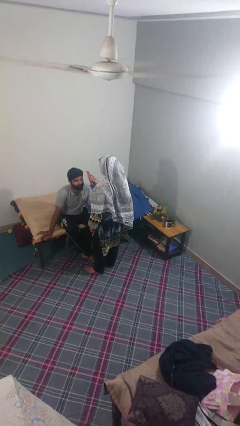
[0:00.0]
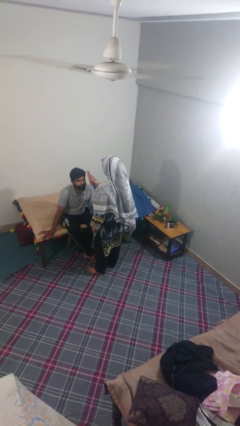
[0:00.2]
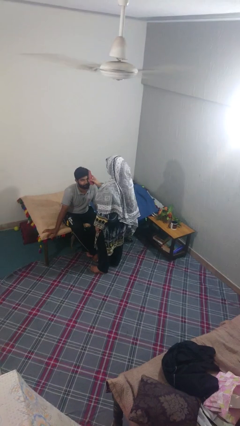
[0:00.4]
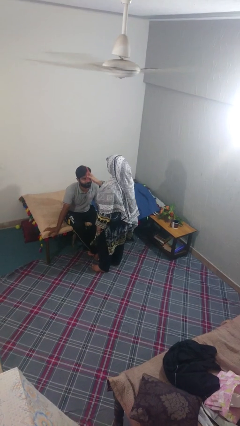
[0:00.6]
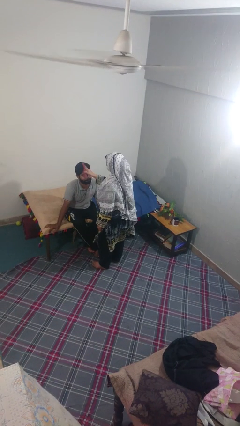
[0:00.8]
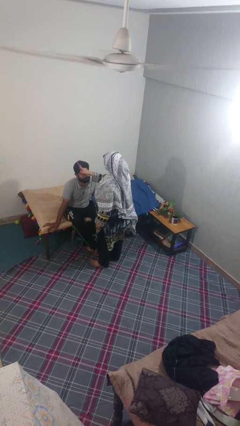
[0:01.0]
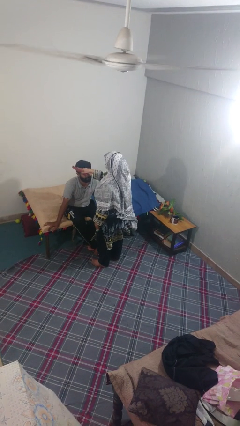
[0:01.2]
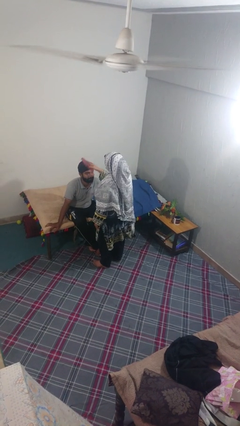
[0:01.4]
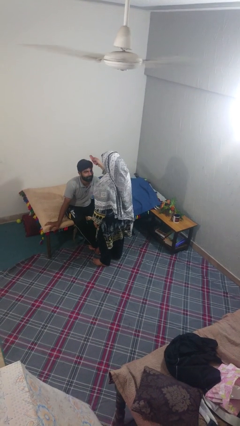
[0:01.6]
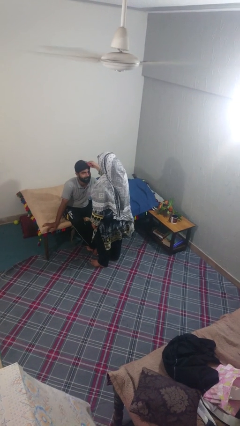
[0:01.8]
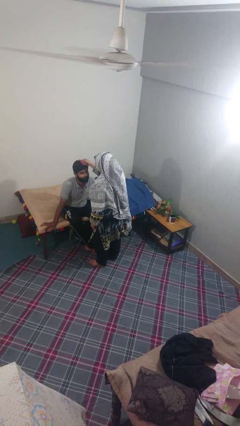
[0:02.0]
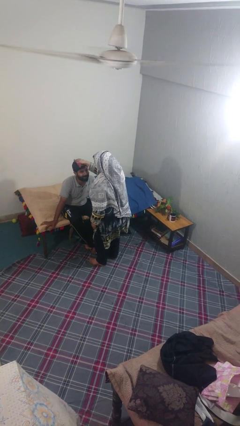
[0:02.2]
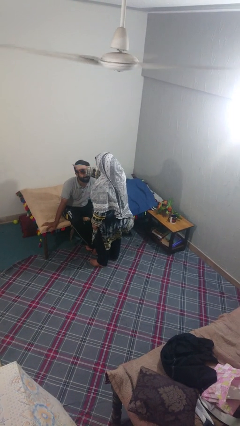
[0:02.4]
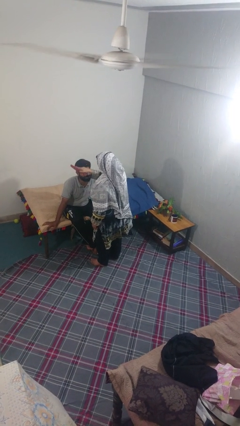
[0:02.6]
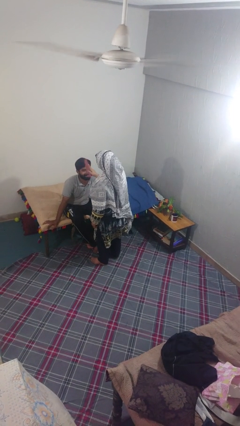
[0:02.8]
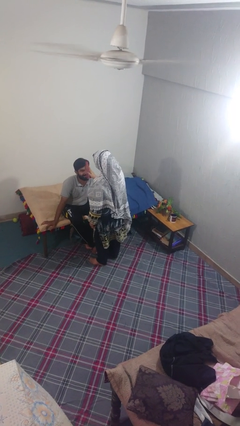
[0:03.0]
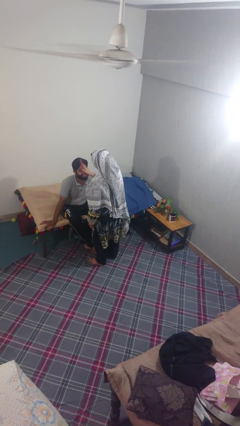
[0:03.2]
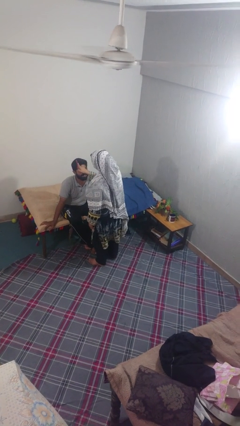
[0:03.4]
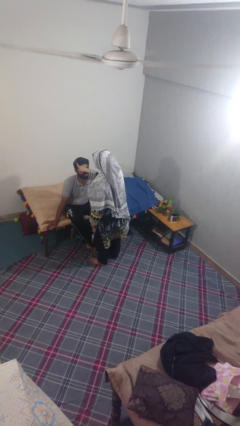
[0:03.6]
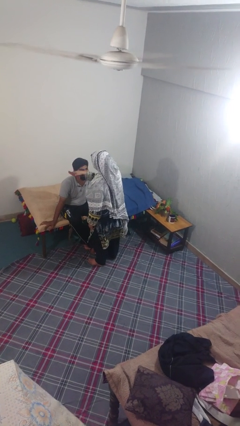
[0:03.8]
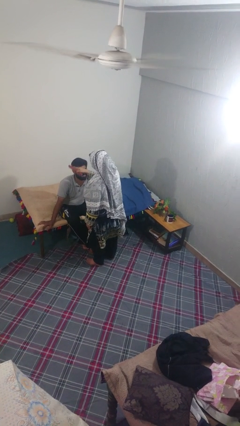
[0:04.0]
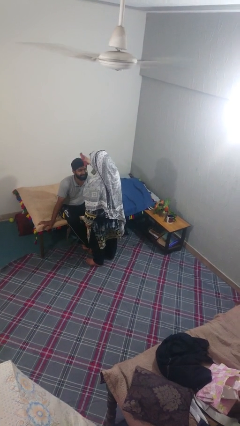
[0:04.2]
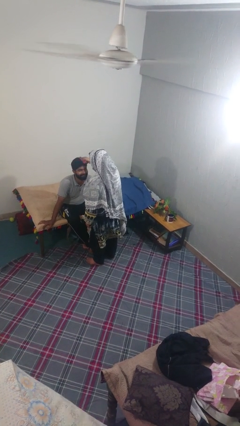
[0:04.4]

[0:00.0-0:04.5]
person brushes hair of person

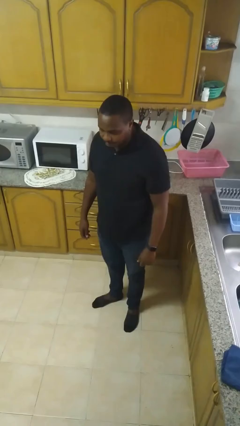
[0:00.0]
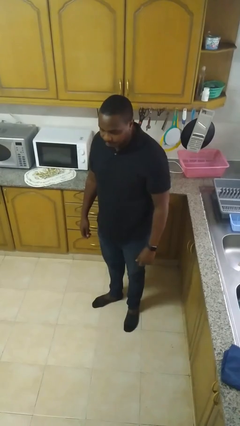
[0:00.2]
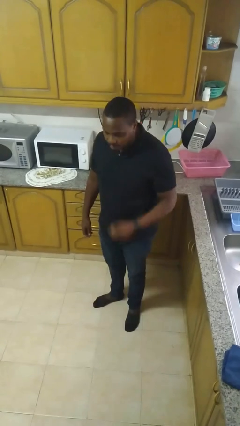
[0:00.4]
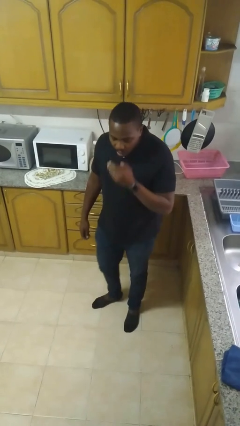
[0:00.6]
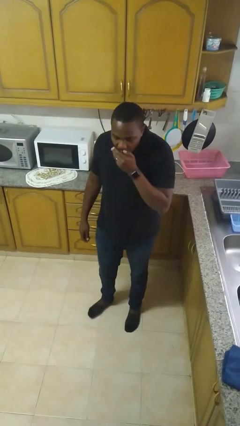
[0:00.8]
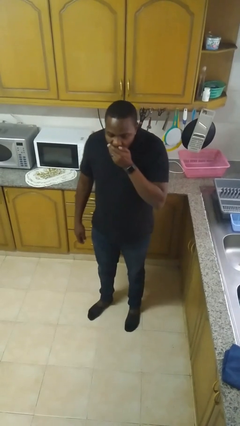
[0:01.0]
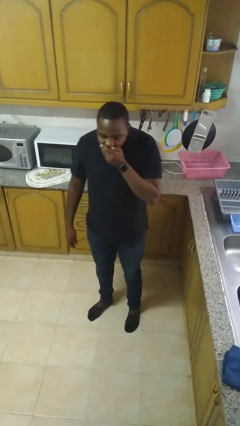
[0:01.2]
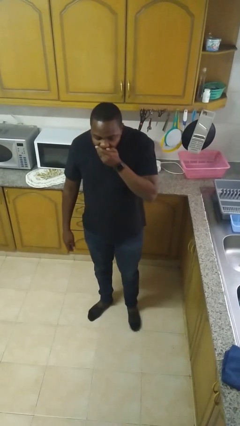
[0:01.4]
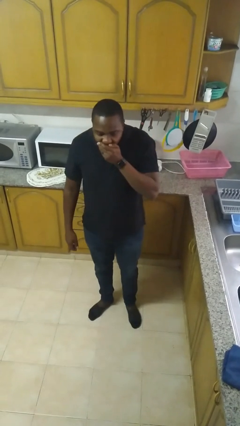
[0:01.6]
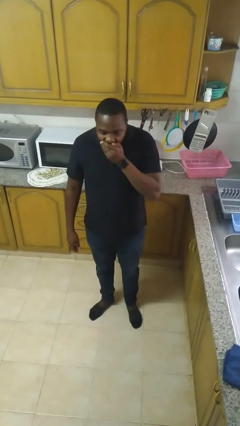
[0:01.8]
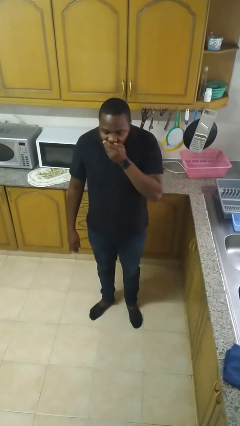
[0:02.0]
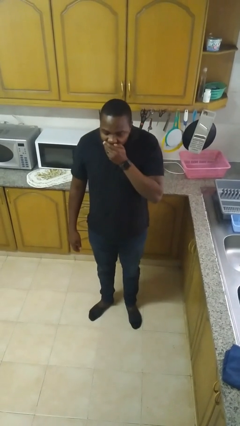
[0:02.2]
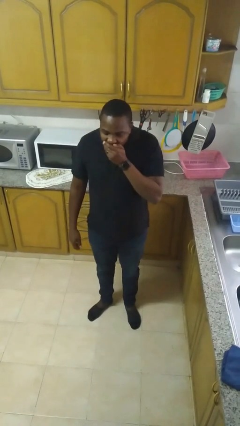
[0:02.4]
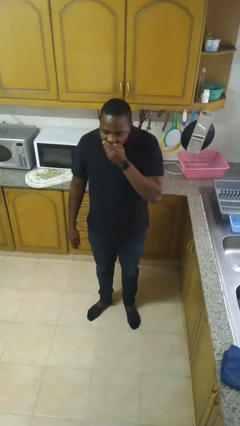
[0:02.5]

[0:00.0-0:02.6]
person yawns

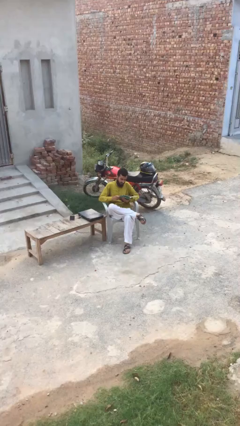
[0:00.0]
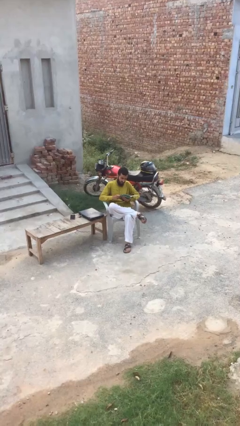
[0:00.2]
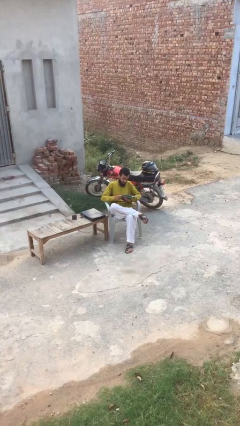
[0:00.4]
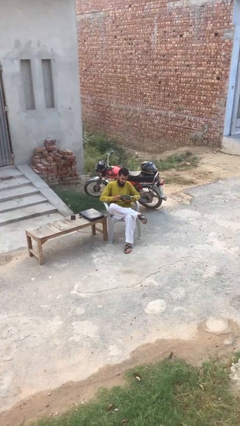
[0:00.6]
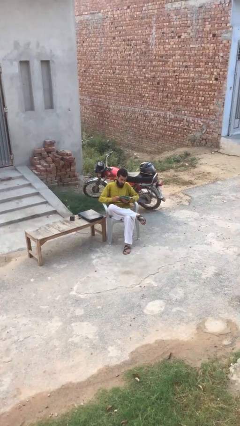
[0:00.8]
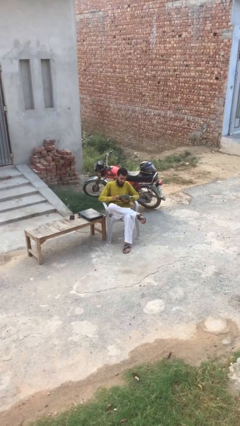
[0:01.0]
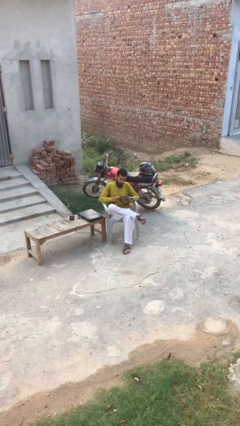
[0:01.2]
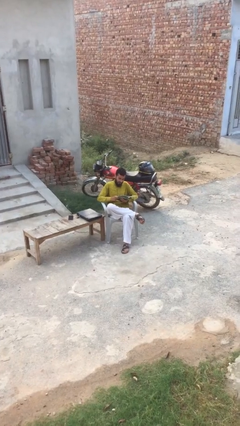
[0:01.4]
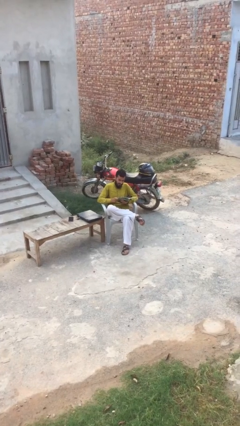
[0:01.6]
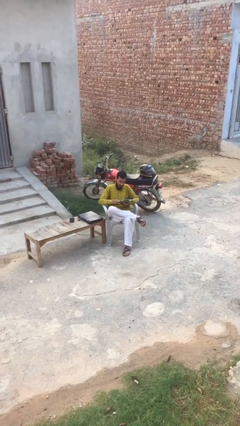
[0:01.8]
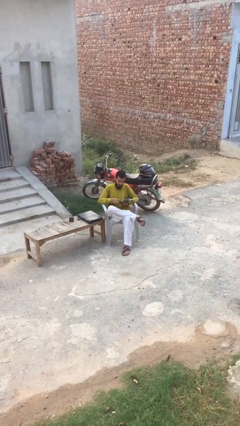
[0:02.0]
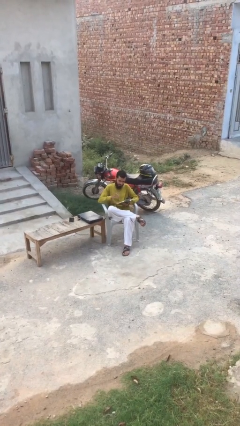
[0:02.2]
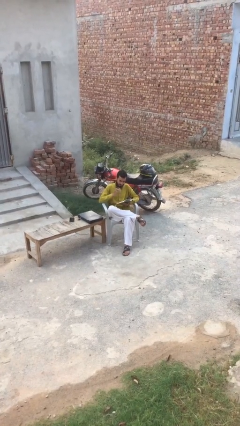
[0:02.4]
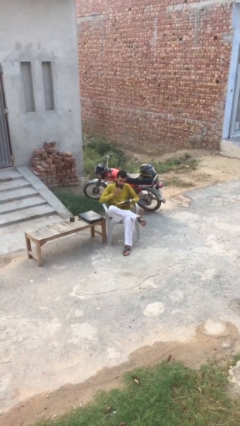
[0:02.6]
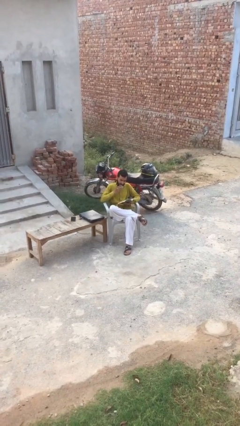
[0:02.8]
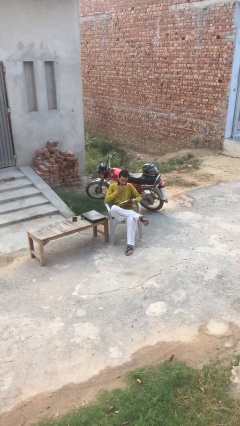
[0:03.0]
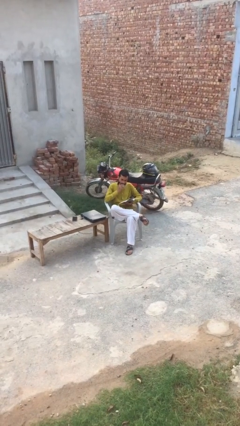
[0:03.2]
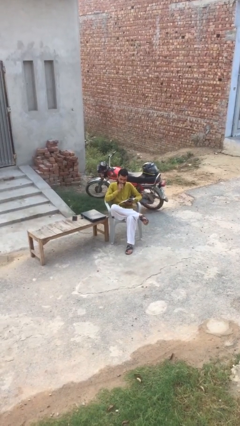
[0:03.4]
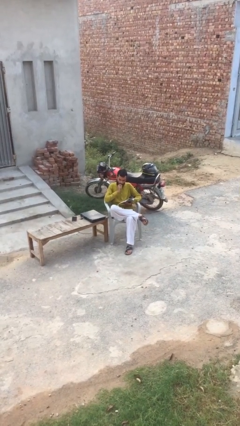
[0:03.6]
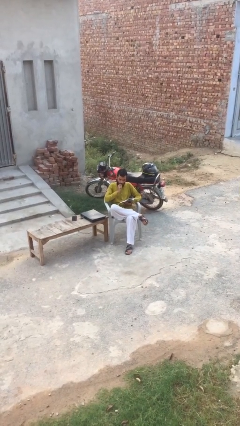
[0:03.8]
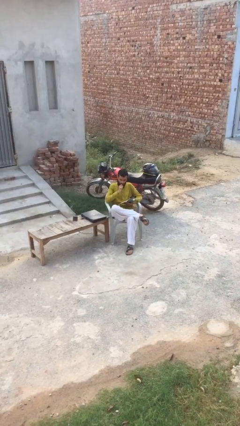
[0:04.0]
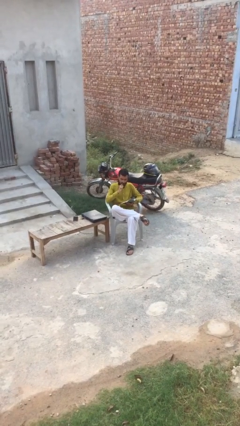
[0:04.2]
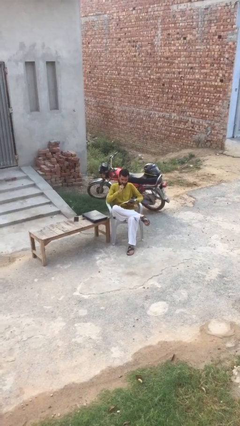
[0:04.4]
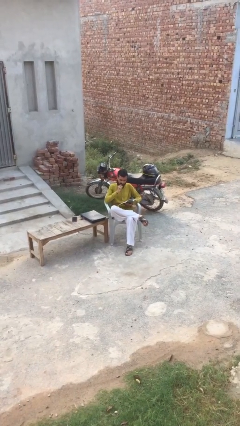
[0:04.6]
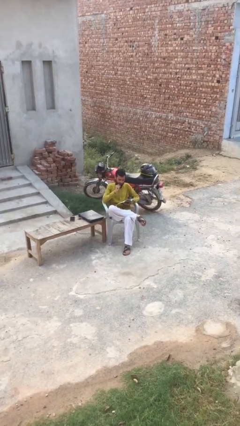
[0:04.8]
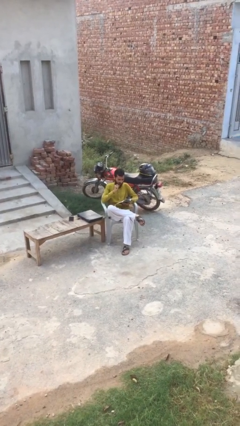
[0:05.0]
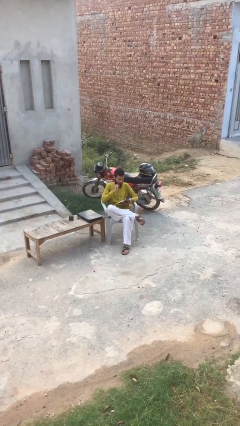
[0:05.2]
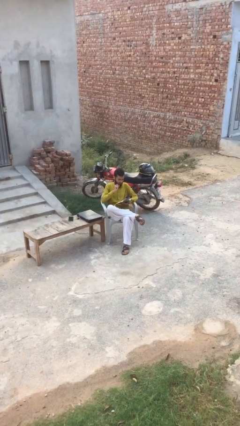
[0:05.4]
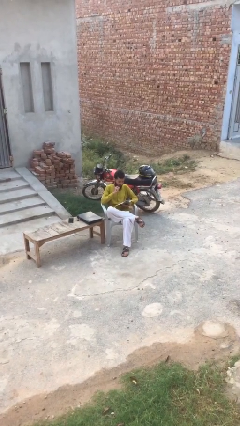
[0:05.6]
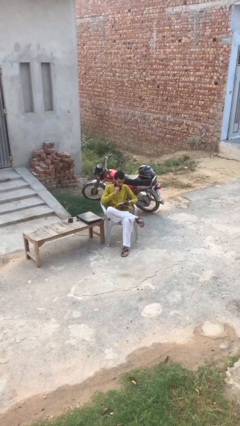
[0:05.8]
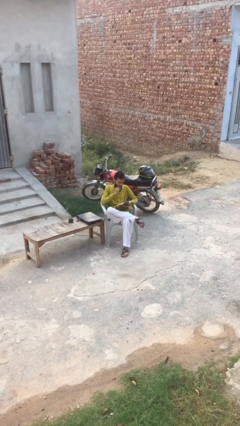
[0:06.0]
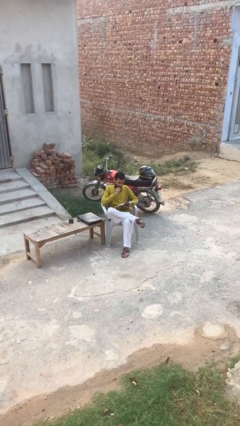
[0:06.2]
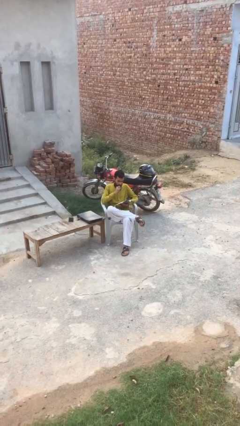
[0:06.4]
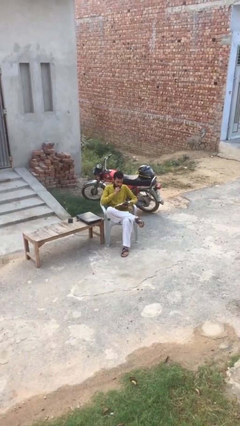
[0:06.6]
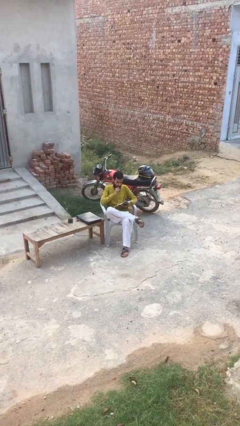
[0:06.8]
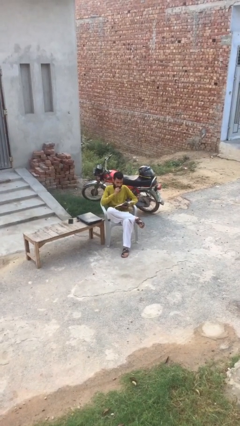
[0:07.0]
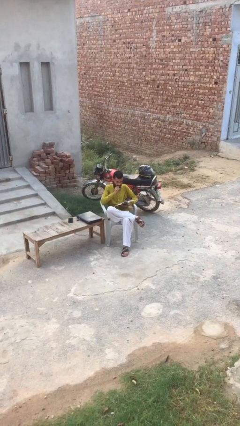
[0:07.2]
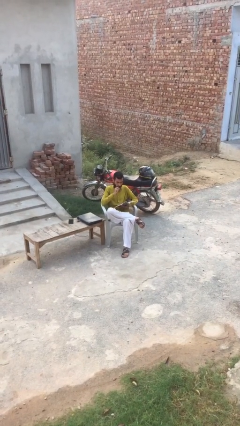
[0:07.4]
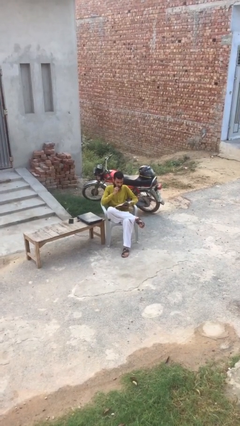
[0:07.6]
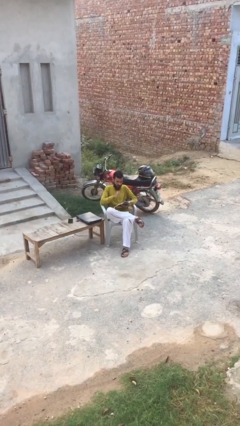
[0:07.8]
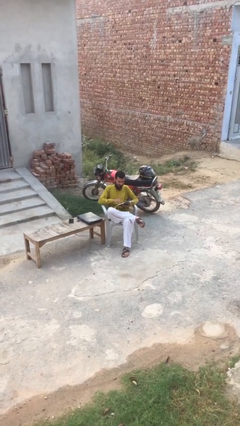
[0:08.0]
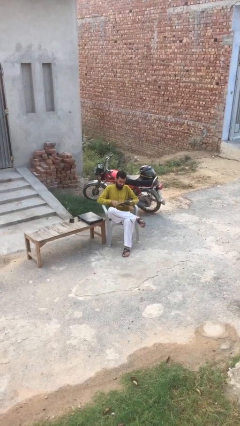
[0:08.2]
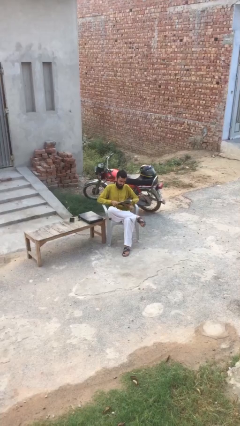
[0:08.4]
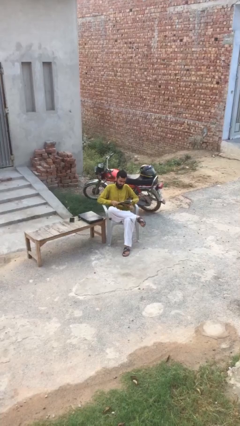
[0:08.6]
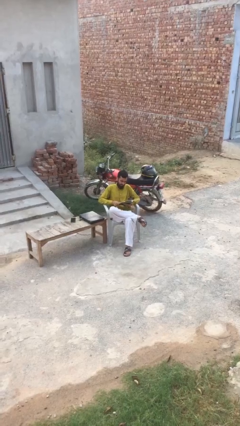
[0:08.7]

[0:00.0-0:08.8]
person reads document

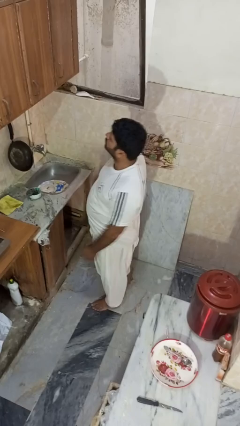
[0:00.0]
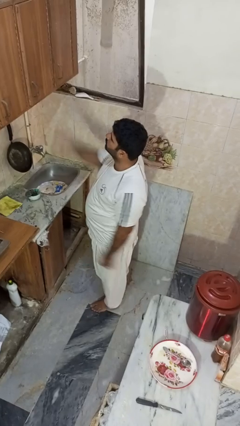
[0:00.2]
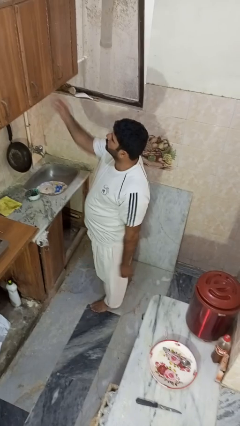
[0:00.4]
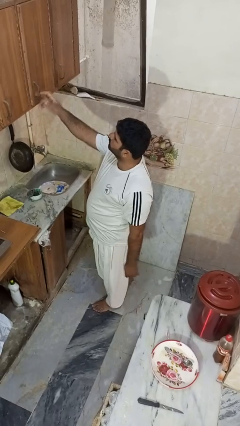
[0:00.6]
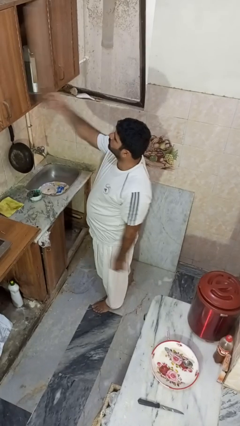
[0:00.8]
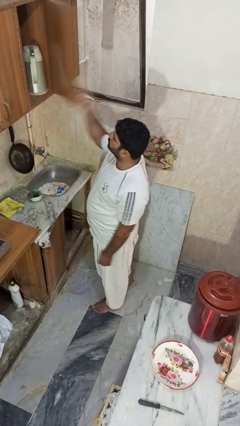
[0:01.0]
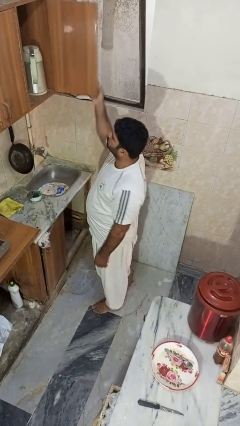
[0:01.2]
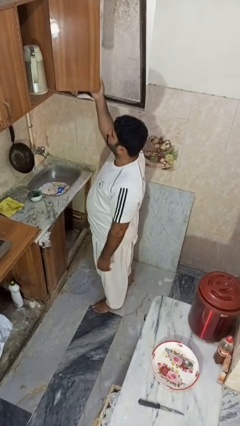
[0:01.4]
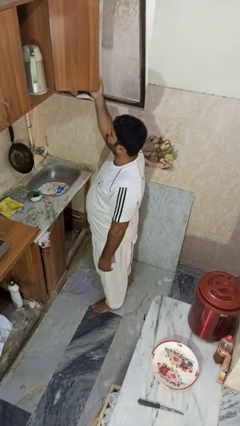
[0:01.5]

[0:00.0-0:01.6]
person opens cabinet
